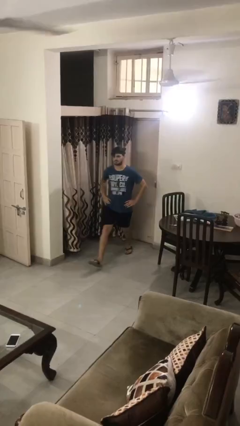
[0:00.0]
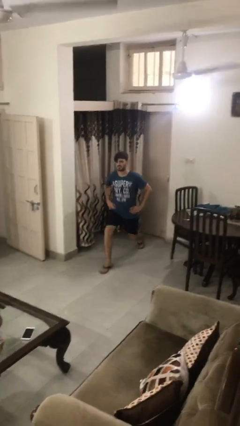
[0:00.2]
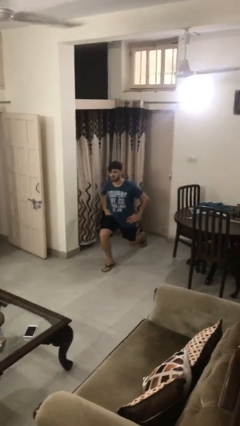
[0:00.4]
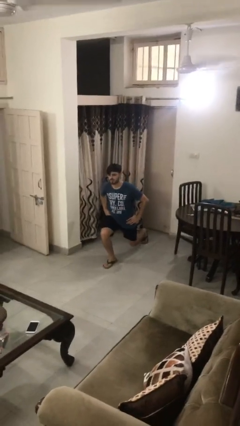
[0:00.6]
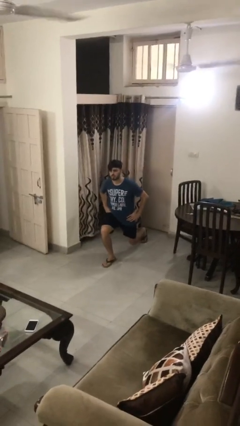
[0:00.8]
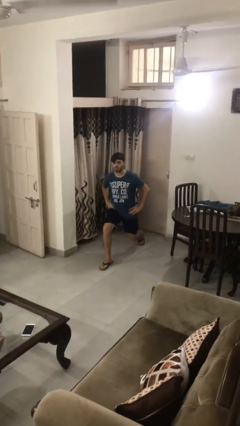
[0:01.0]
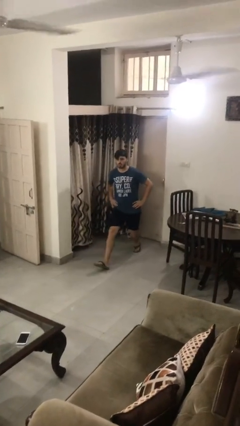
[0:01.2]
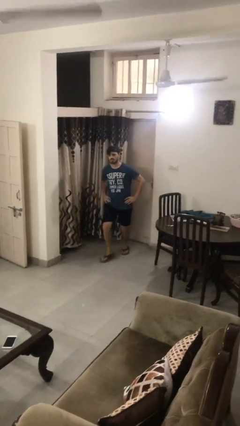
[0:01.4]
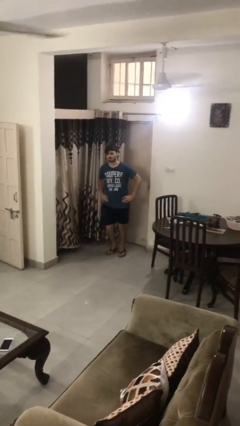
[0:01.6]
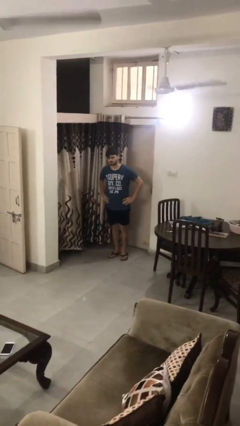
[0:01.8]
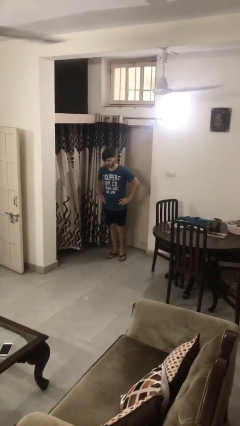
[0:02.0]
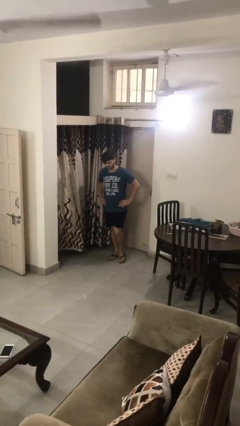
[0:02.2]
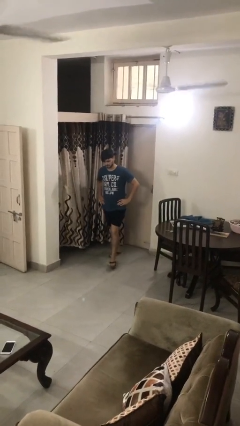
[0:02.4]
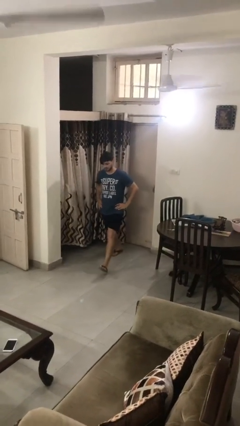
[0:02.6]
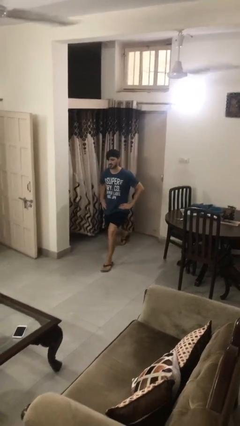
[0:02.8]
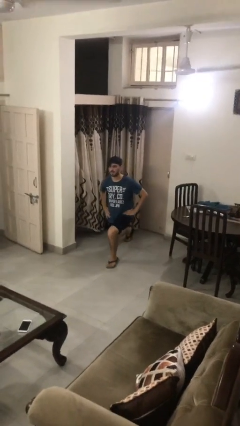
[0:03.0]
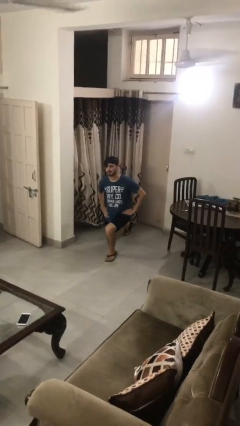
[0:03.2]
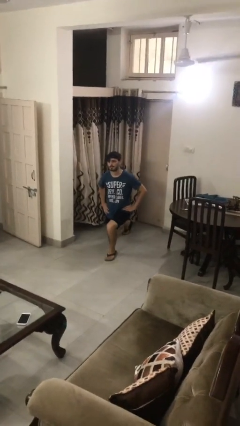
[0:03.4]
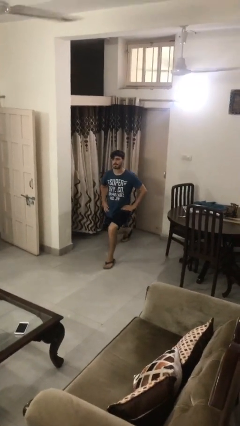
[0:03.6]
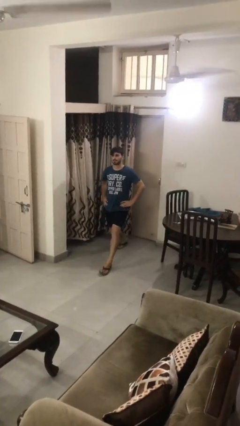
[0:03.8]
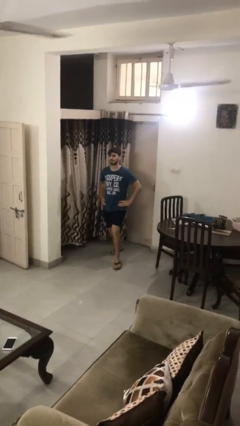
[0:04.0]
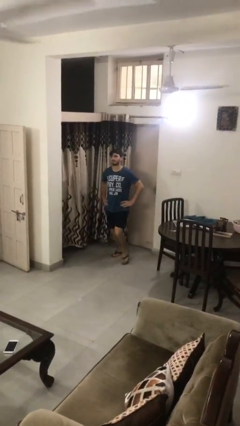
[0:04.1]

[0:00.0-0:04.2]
person exercises with lunges

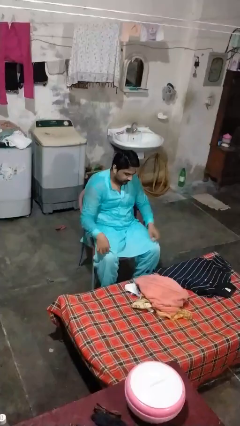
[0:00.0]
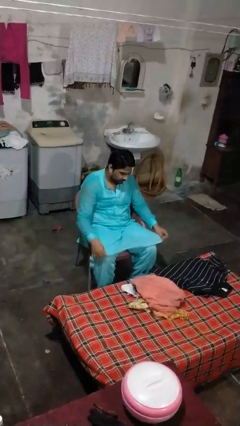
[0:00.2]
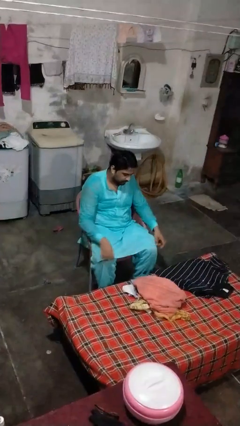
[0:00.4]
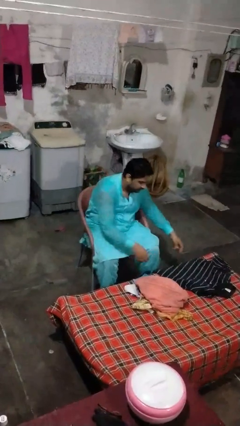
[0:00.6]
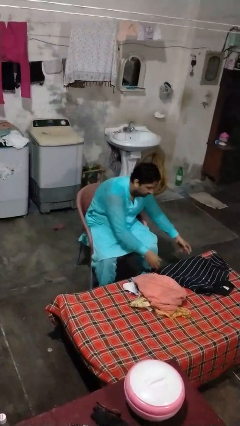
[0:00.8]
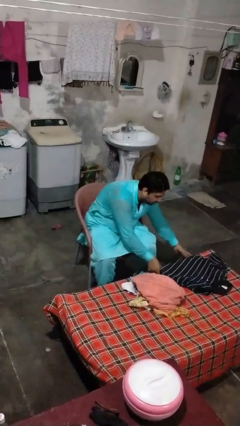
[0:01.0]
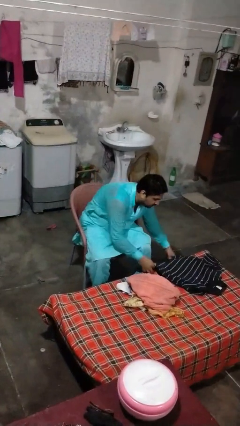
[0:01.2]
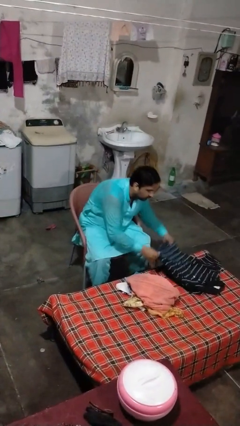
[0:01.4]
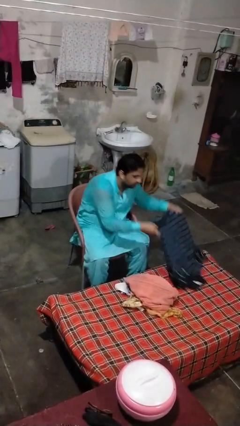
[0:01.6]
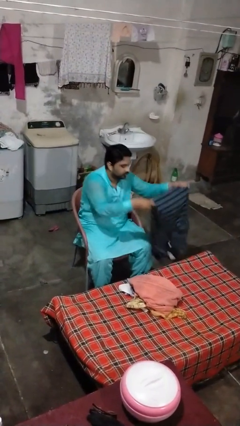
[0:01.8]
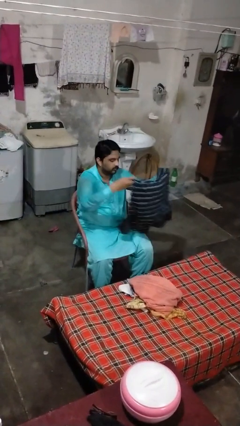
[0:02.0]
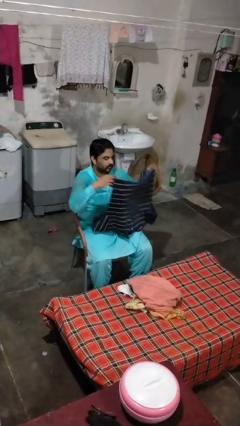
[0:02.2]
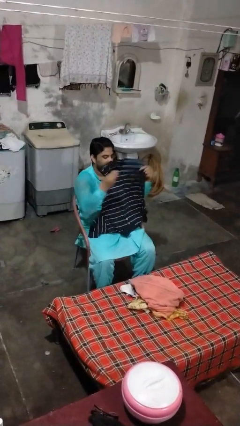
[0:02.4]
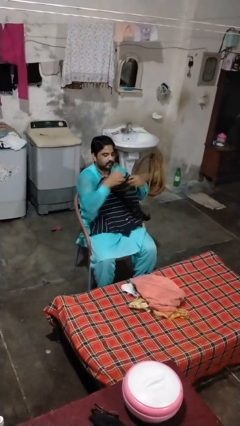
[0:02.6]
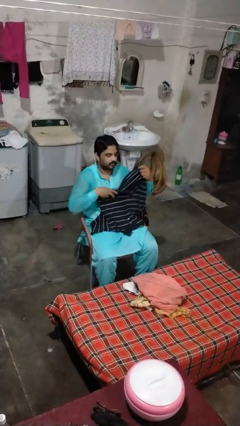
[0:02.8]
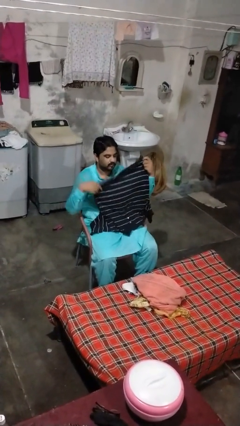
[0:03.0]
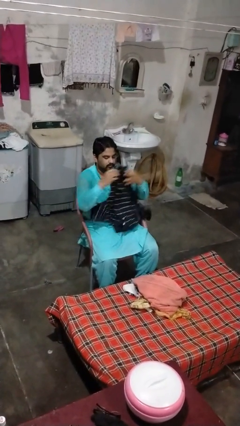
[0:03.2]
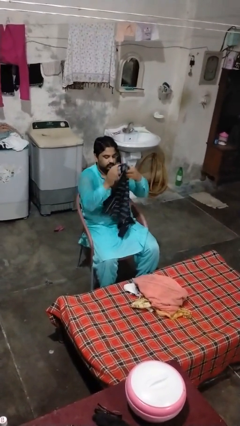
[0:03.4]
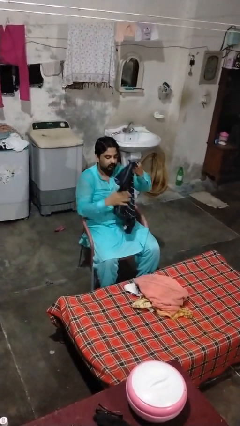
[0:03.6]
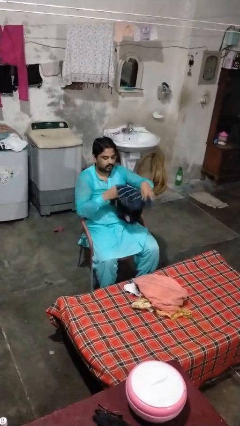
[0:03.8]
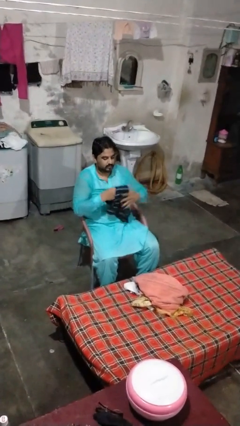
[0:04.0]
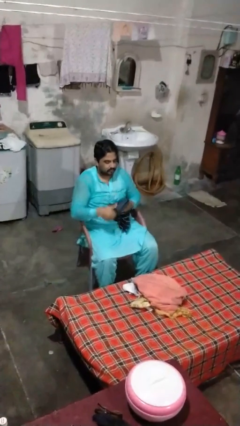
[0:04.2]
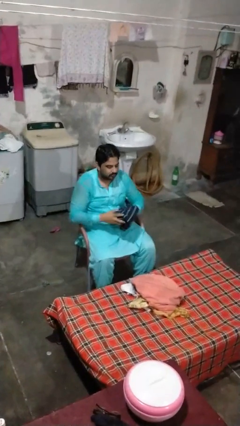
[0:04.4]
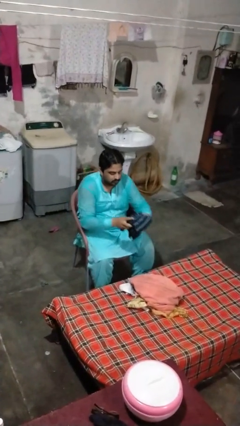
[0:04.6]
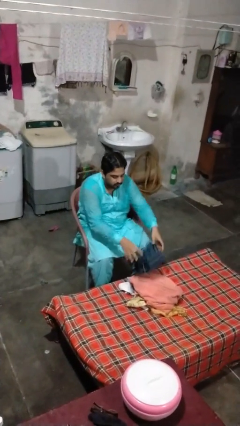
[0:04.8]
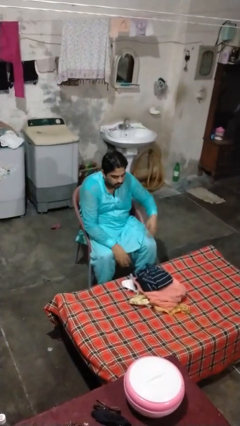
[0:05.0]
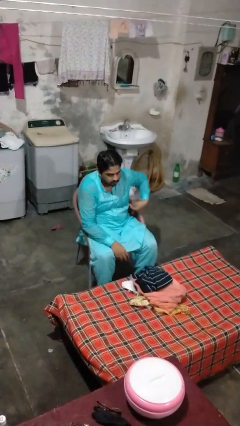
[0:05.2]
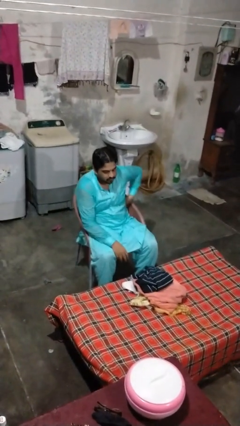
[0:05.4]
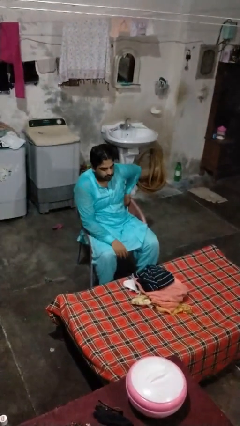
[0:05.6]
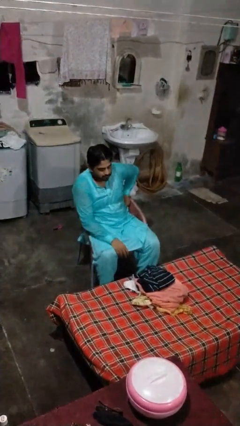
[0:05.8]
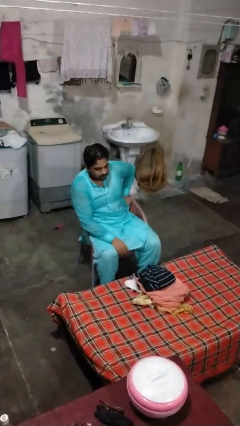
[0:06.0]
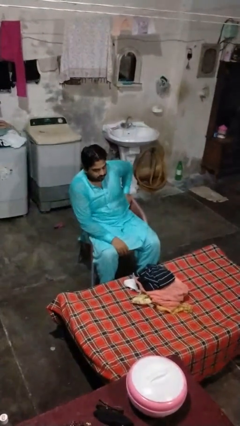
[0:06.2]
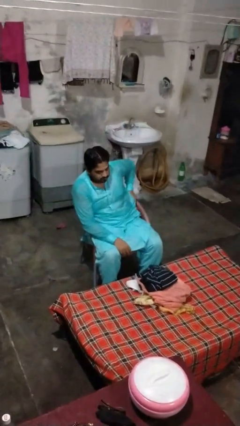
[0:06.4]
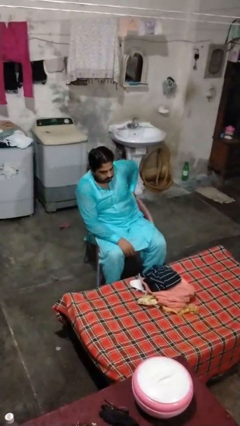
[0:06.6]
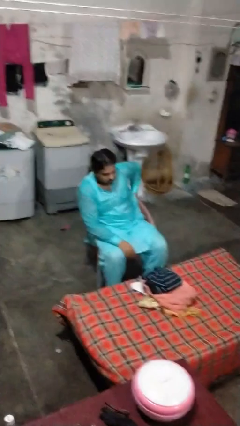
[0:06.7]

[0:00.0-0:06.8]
person folds shirt

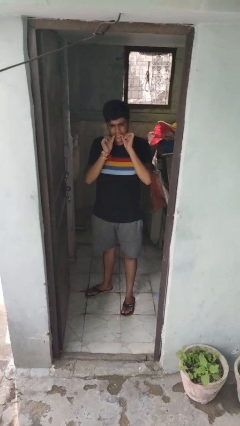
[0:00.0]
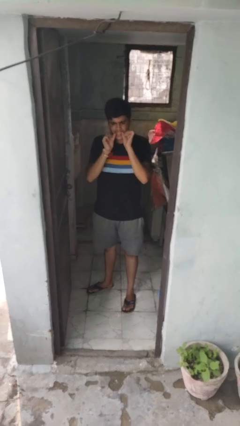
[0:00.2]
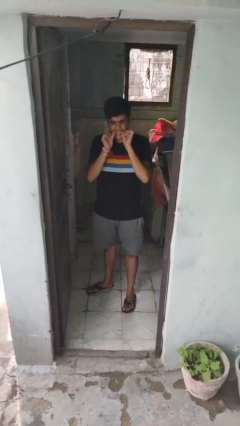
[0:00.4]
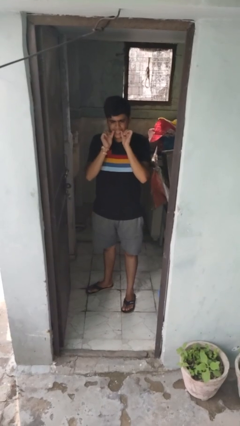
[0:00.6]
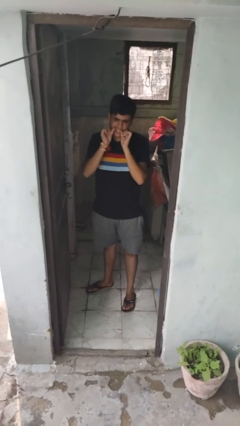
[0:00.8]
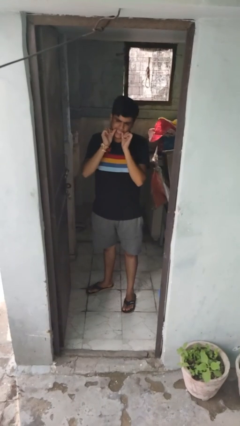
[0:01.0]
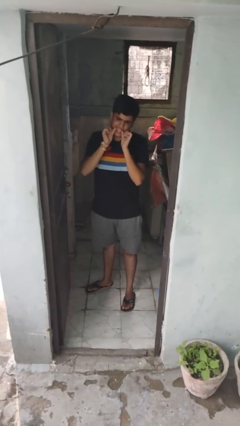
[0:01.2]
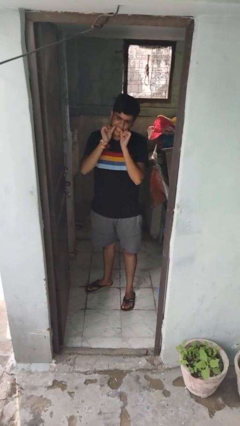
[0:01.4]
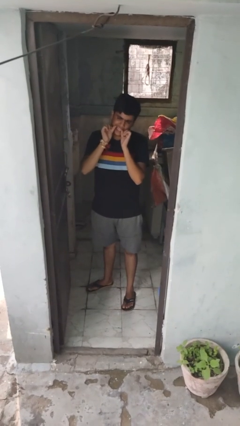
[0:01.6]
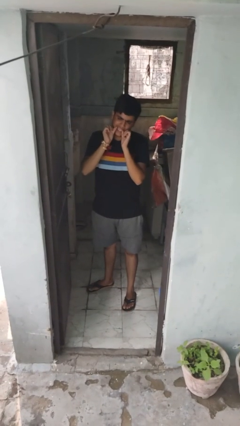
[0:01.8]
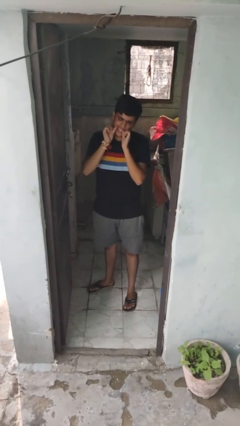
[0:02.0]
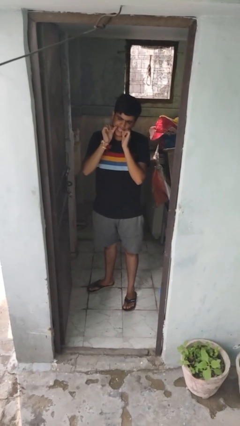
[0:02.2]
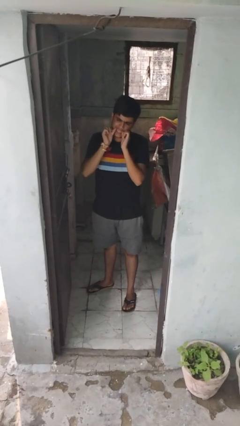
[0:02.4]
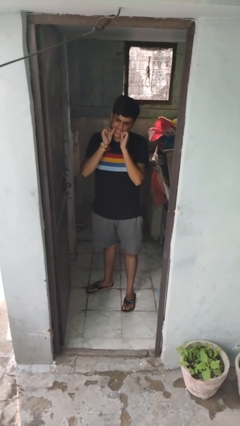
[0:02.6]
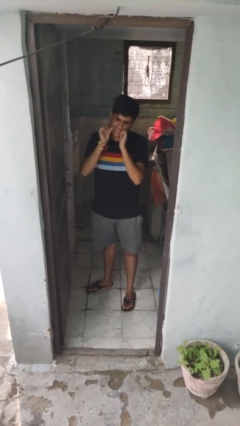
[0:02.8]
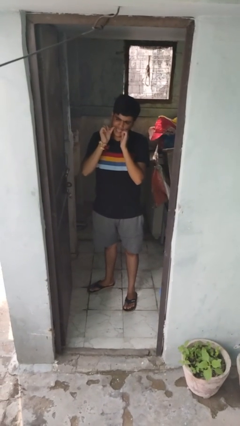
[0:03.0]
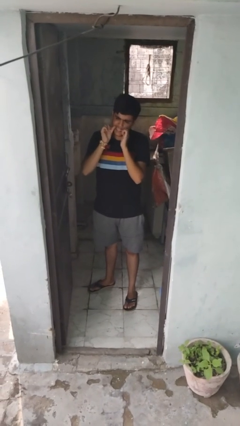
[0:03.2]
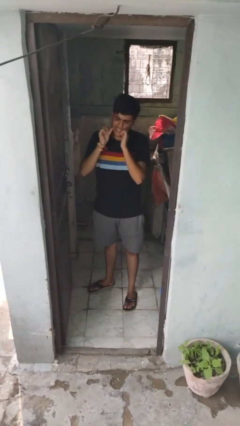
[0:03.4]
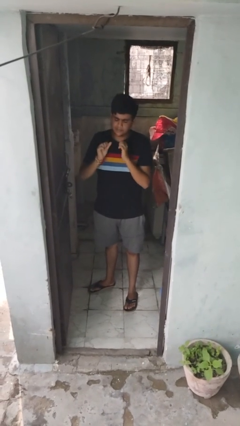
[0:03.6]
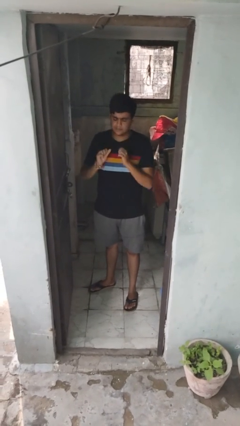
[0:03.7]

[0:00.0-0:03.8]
person flosses

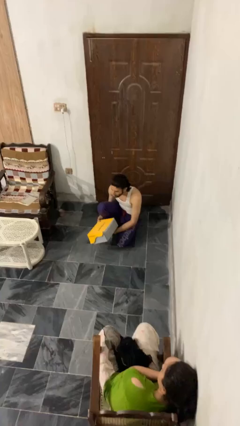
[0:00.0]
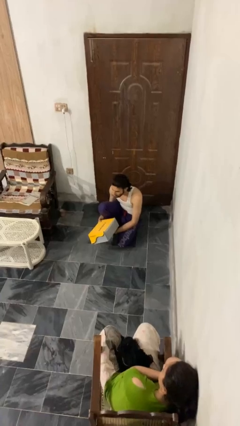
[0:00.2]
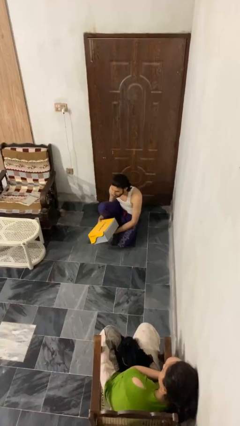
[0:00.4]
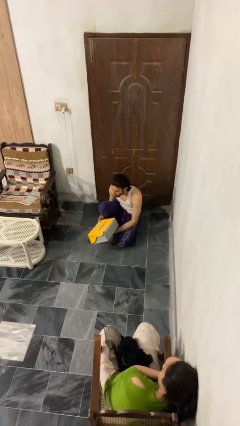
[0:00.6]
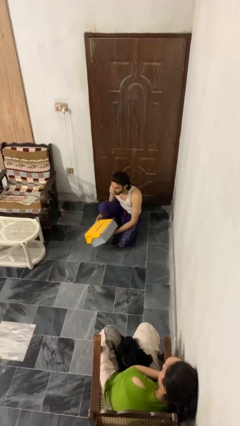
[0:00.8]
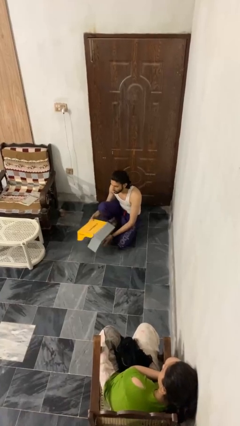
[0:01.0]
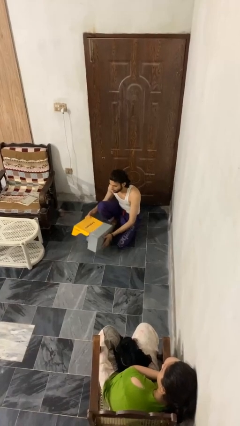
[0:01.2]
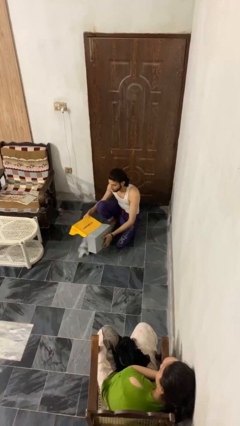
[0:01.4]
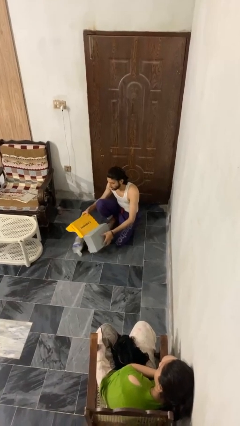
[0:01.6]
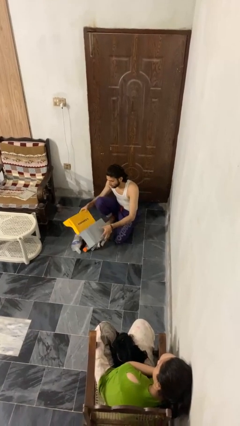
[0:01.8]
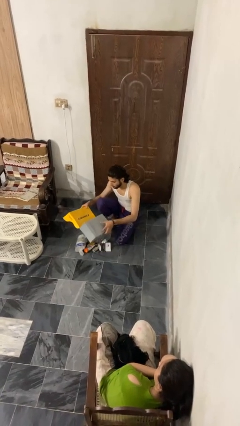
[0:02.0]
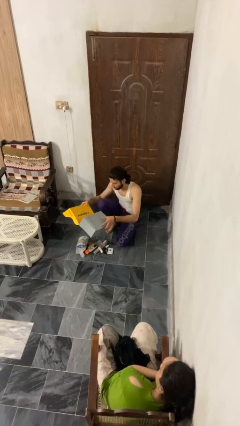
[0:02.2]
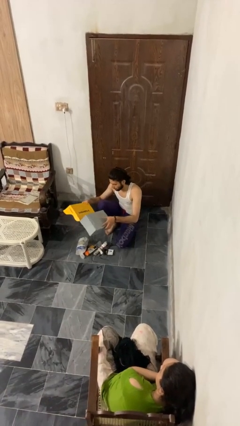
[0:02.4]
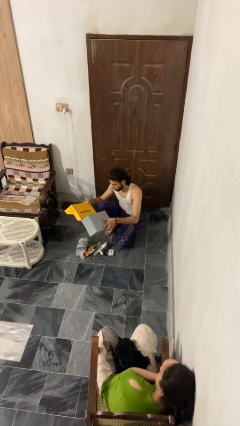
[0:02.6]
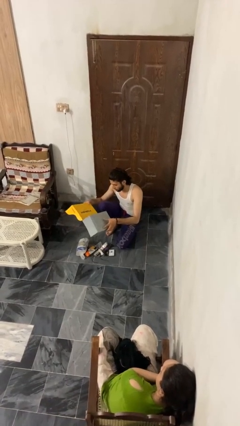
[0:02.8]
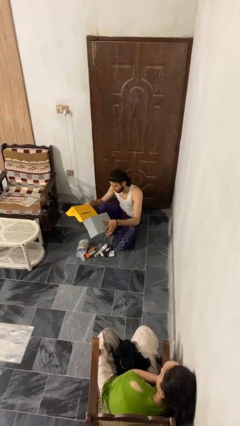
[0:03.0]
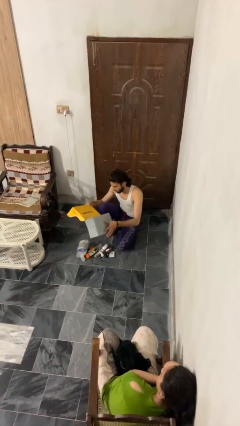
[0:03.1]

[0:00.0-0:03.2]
person unloads box onto floor
